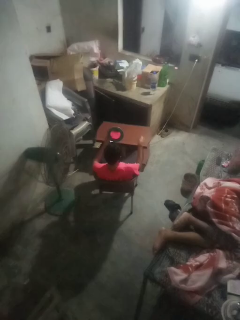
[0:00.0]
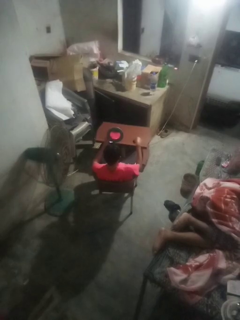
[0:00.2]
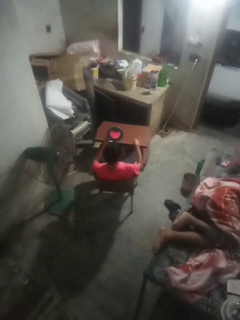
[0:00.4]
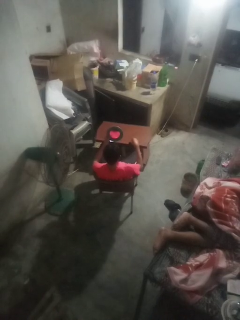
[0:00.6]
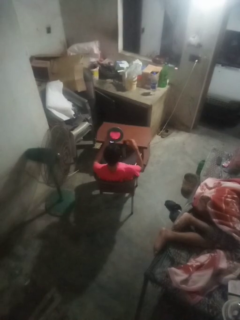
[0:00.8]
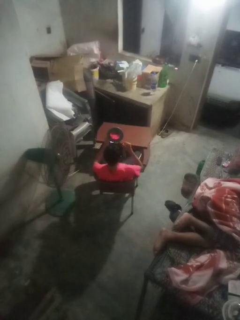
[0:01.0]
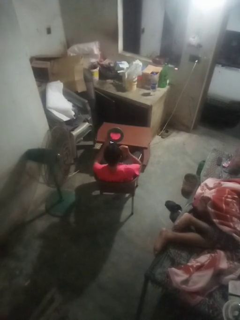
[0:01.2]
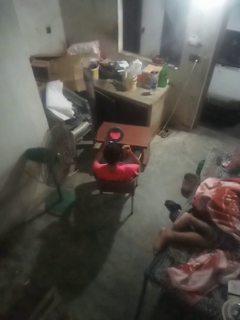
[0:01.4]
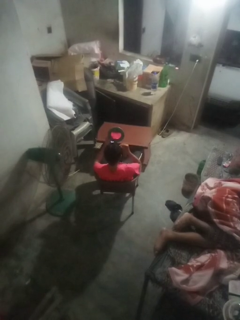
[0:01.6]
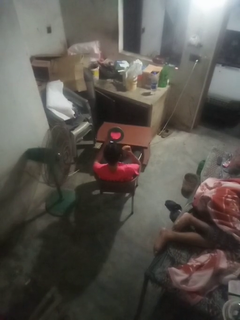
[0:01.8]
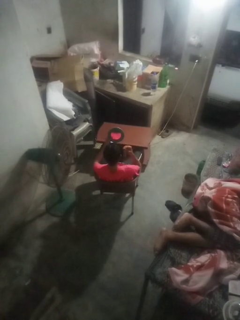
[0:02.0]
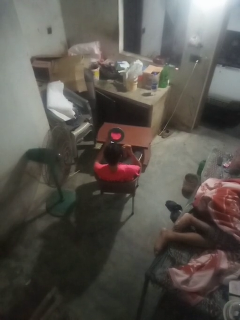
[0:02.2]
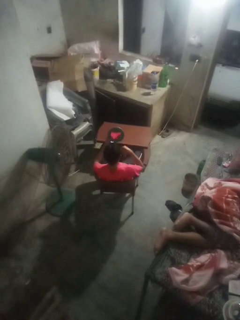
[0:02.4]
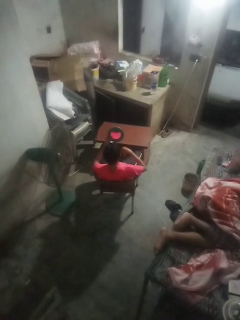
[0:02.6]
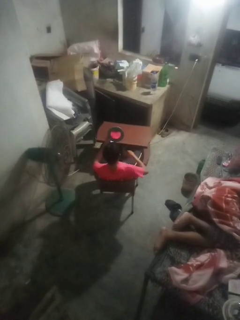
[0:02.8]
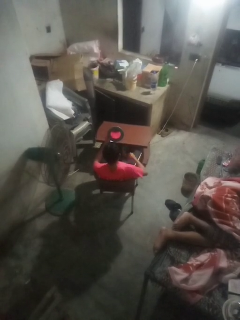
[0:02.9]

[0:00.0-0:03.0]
person applies eye makeup

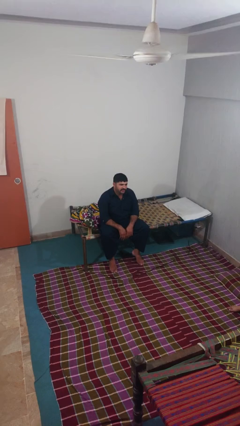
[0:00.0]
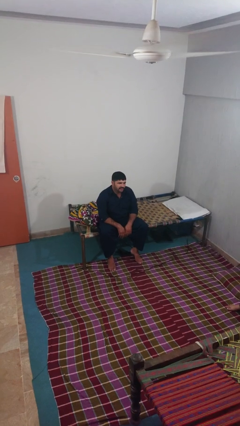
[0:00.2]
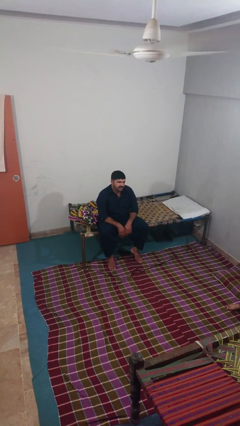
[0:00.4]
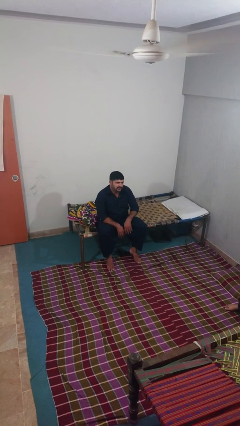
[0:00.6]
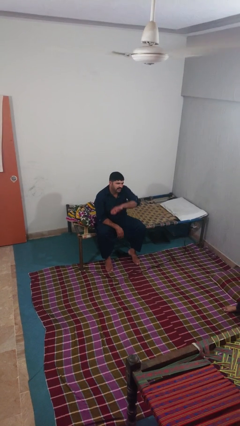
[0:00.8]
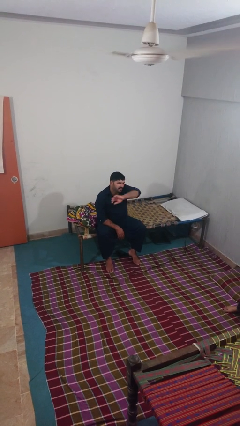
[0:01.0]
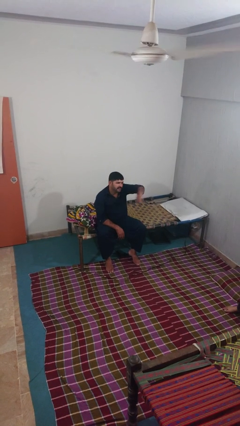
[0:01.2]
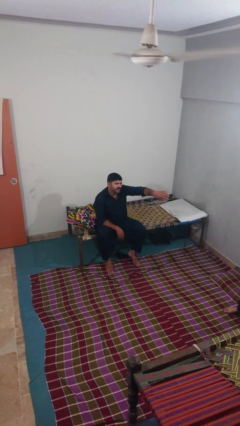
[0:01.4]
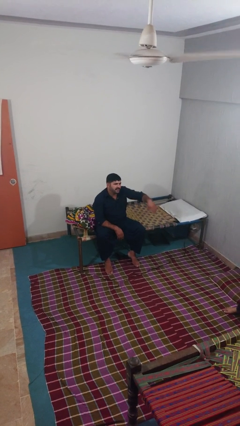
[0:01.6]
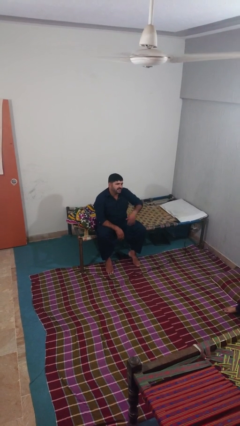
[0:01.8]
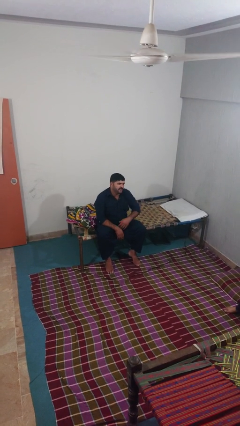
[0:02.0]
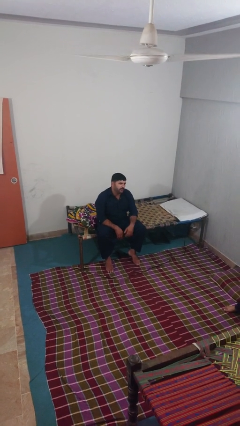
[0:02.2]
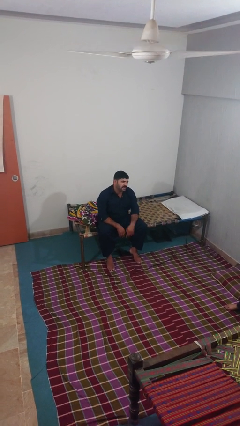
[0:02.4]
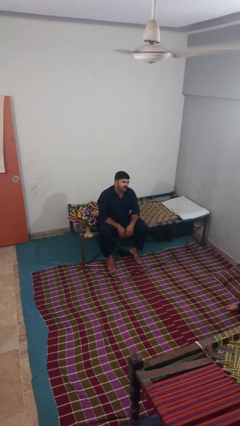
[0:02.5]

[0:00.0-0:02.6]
person gestures swipe left

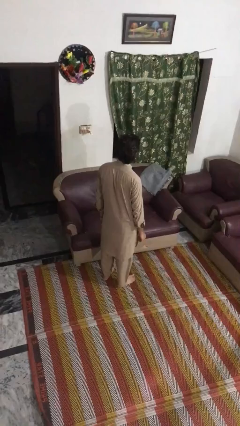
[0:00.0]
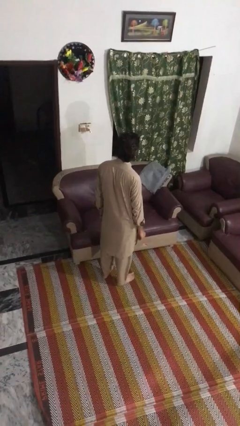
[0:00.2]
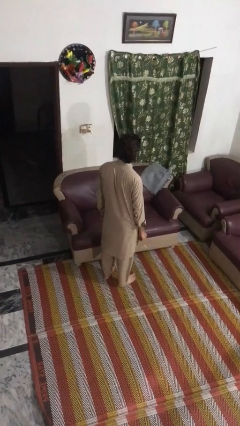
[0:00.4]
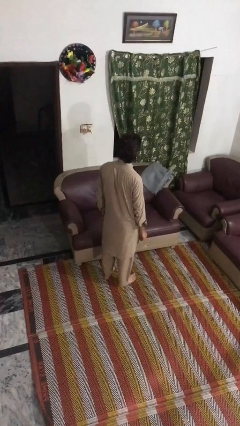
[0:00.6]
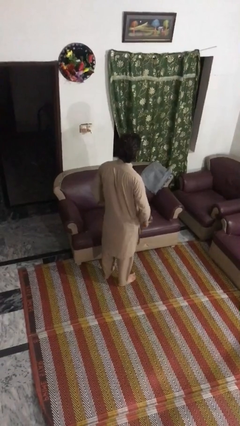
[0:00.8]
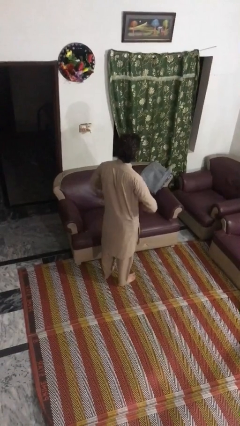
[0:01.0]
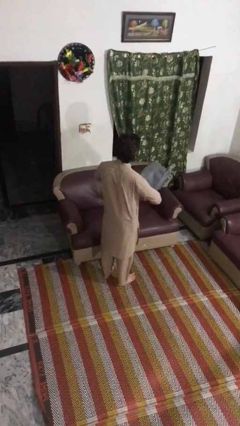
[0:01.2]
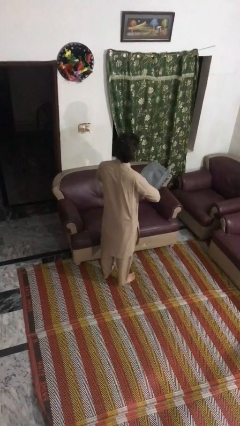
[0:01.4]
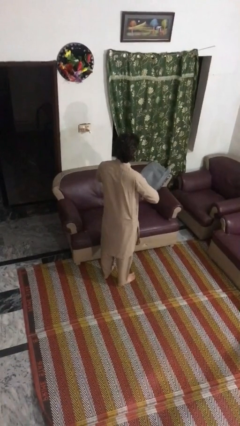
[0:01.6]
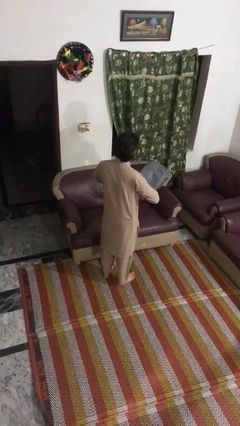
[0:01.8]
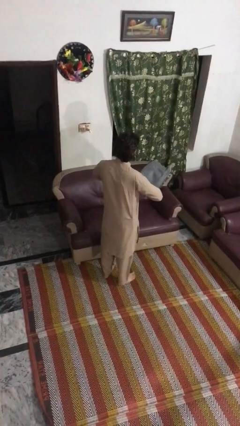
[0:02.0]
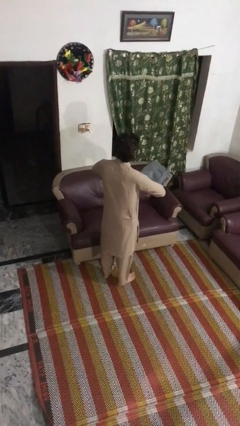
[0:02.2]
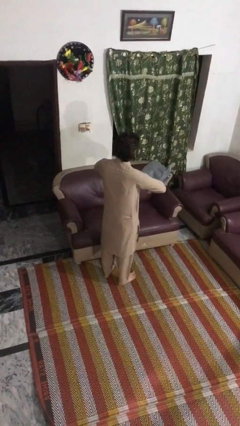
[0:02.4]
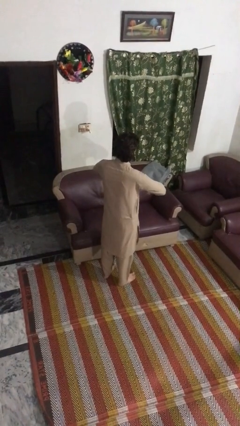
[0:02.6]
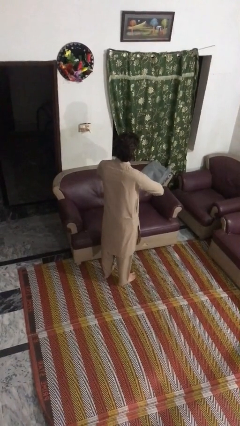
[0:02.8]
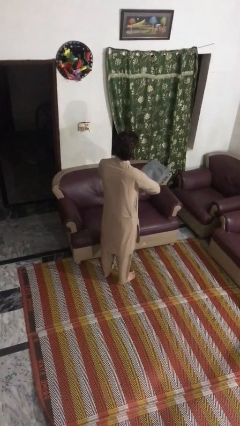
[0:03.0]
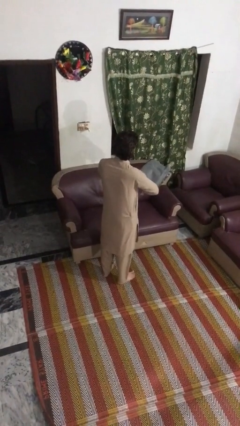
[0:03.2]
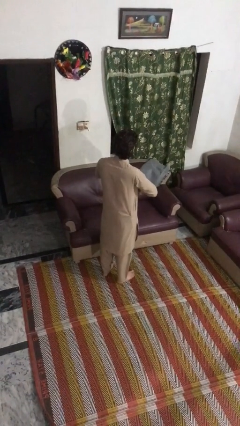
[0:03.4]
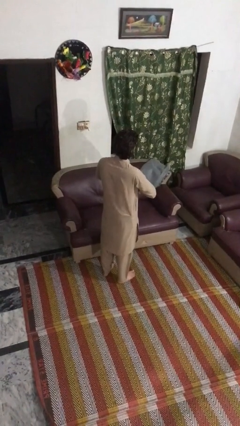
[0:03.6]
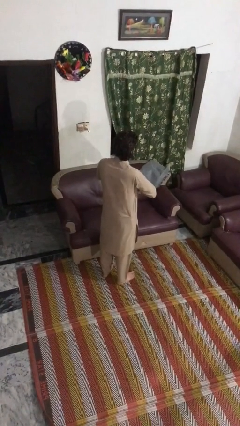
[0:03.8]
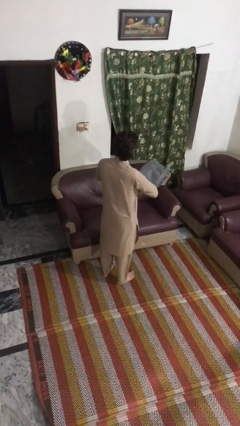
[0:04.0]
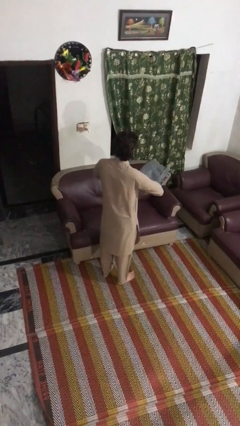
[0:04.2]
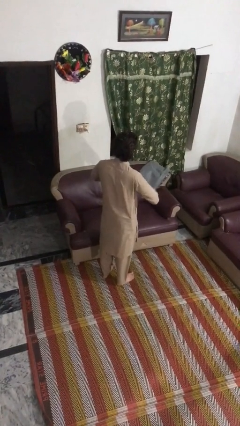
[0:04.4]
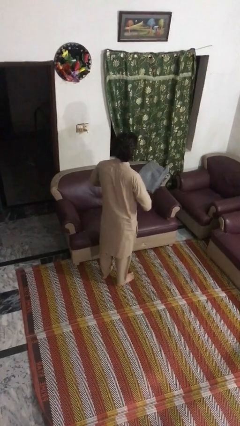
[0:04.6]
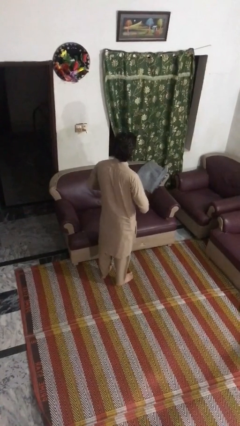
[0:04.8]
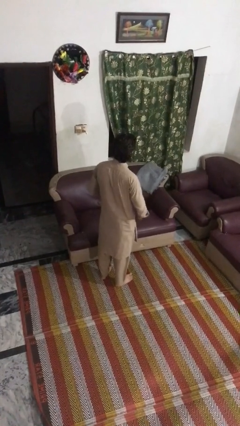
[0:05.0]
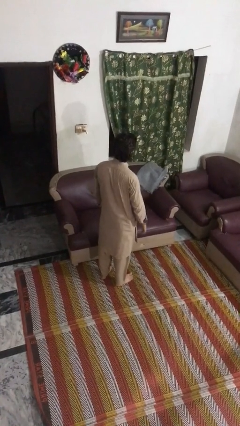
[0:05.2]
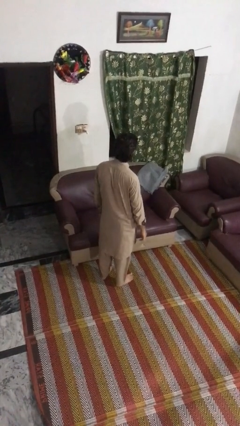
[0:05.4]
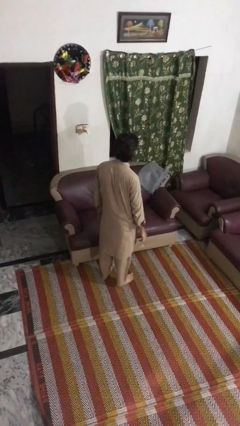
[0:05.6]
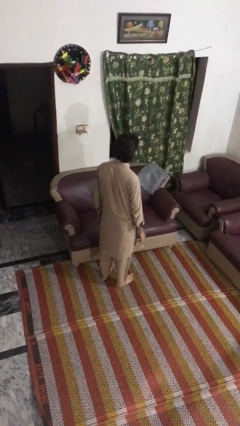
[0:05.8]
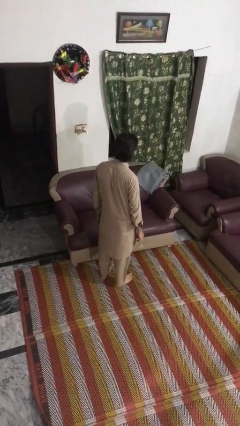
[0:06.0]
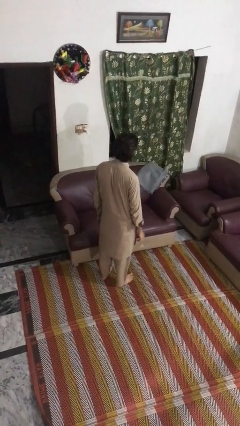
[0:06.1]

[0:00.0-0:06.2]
person cracks knuckles

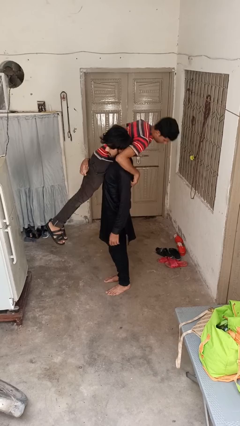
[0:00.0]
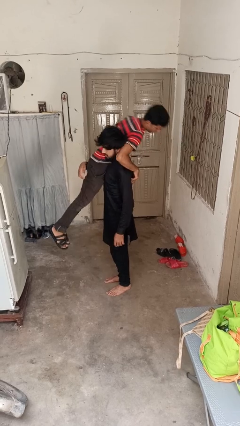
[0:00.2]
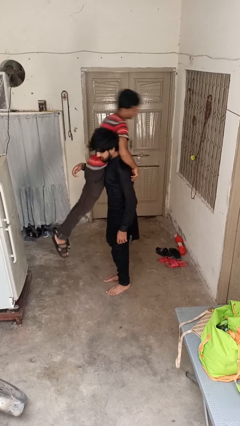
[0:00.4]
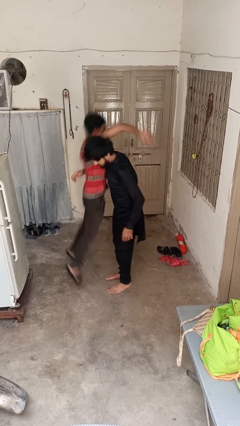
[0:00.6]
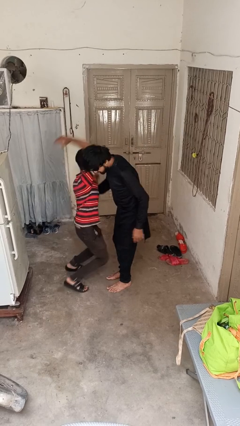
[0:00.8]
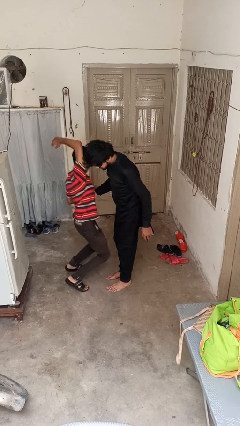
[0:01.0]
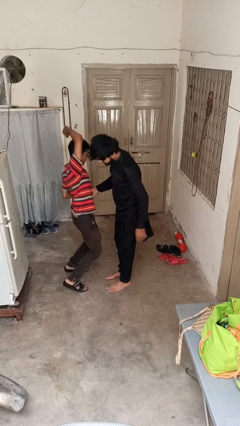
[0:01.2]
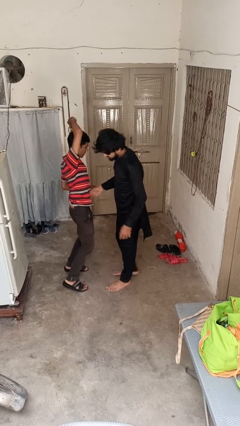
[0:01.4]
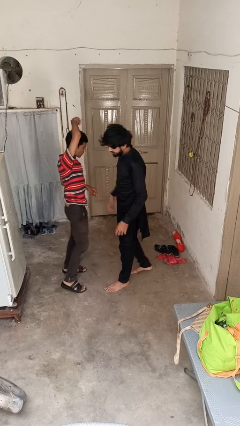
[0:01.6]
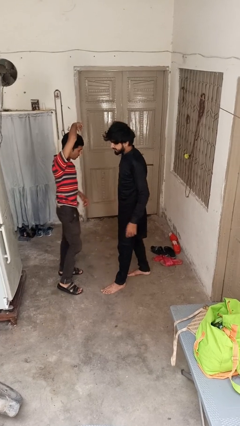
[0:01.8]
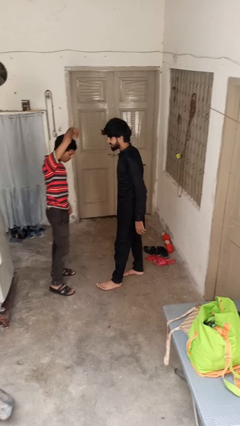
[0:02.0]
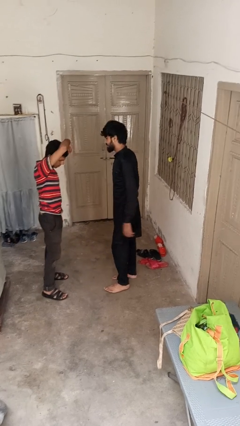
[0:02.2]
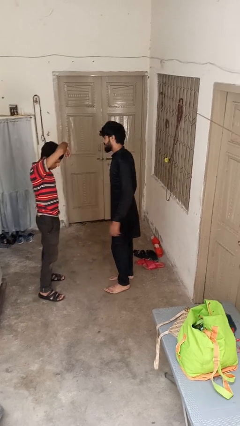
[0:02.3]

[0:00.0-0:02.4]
person puts down person

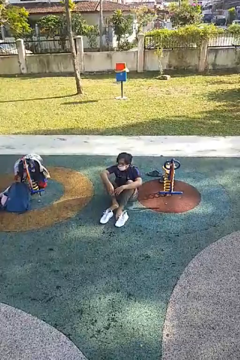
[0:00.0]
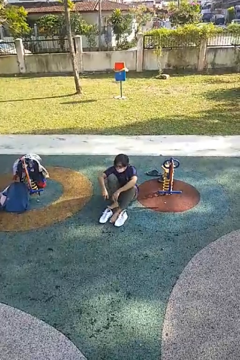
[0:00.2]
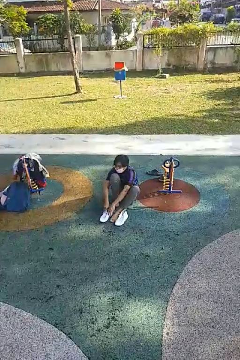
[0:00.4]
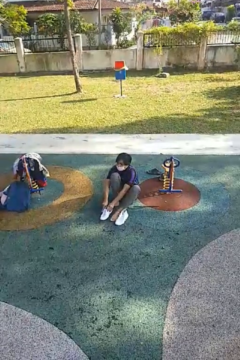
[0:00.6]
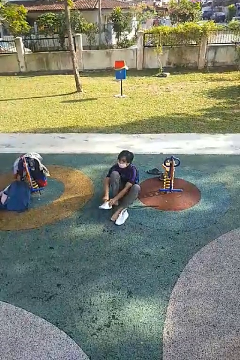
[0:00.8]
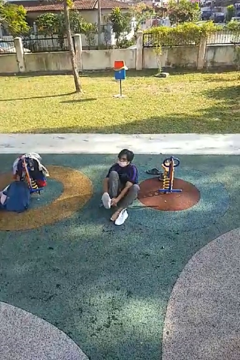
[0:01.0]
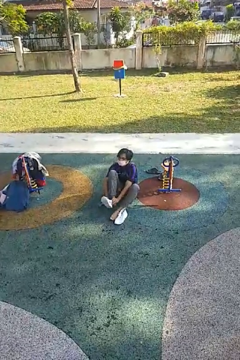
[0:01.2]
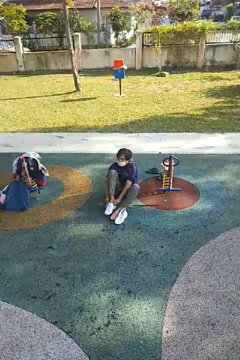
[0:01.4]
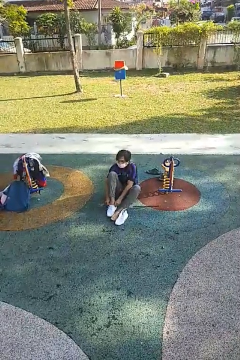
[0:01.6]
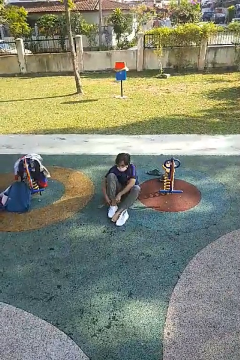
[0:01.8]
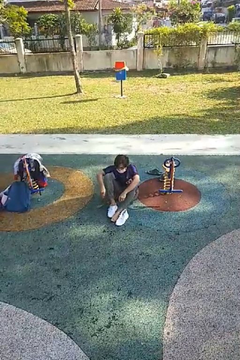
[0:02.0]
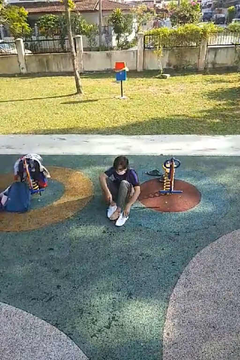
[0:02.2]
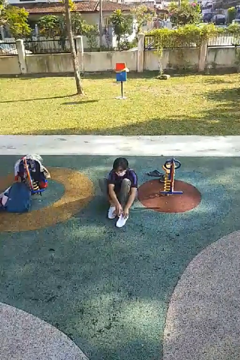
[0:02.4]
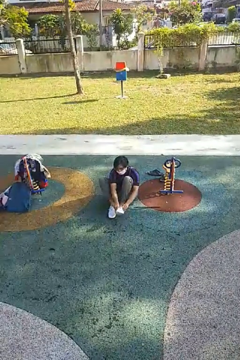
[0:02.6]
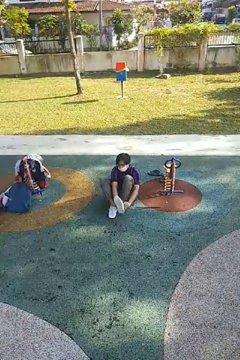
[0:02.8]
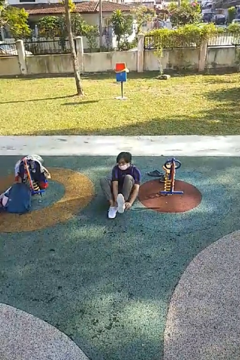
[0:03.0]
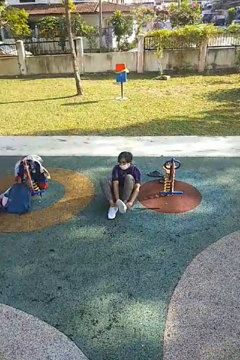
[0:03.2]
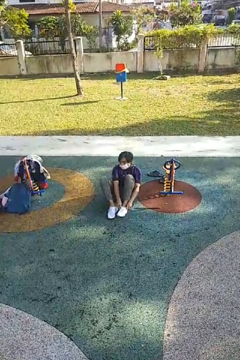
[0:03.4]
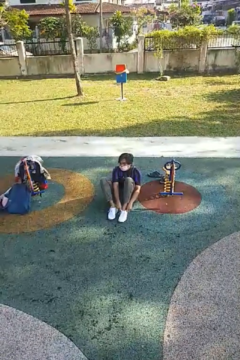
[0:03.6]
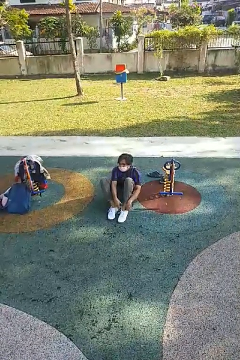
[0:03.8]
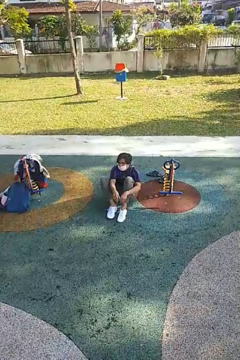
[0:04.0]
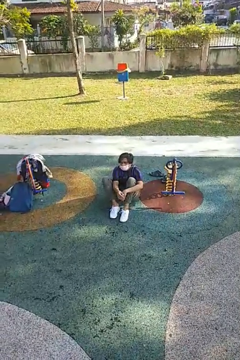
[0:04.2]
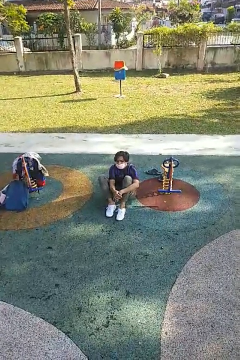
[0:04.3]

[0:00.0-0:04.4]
person puts on shoes
